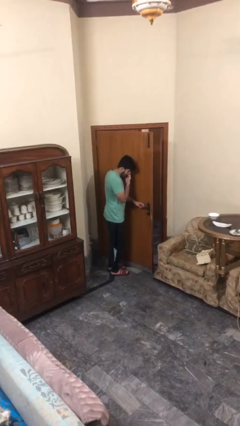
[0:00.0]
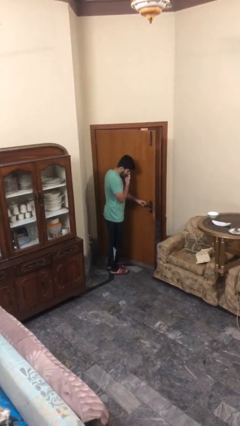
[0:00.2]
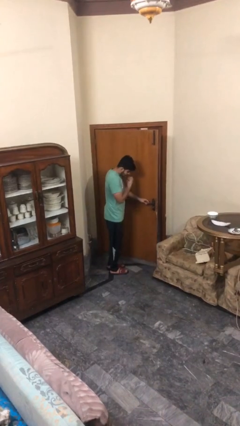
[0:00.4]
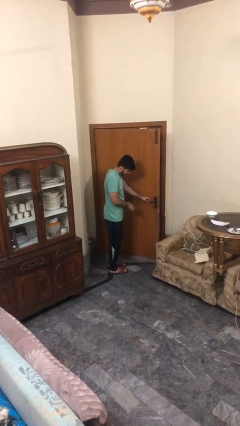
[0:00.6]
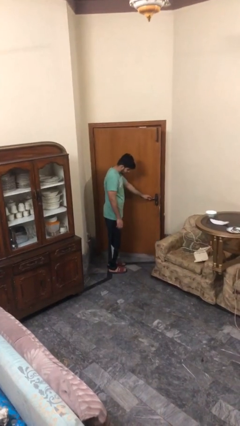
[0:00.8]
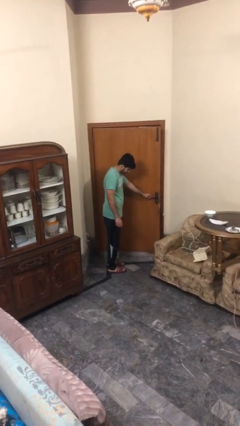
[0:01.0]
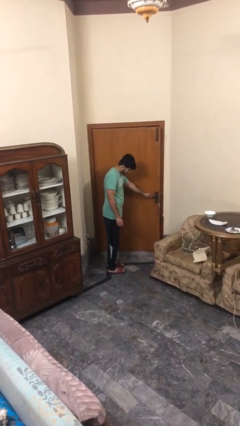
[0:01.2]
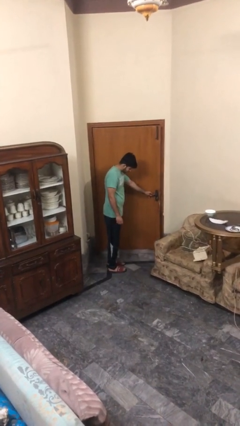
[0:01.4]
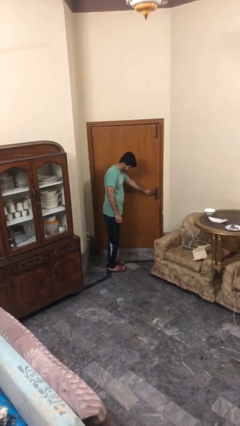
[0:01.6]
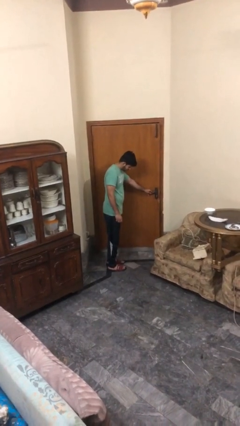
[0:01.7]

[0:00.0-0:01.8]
person closes facility door

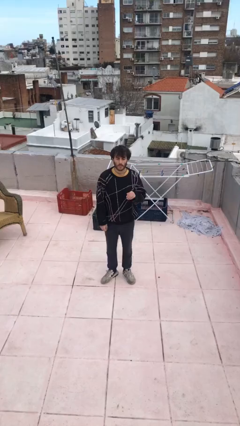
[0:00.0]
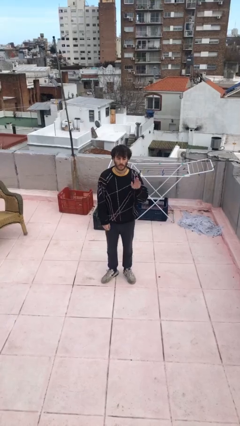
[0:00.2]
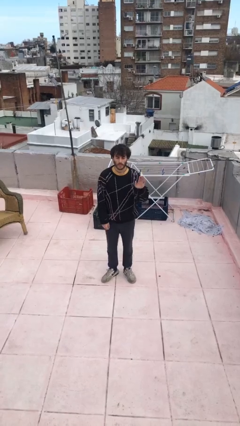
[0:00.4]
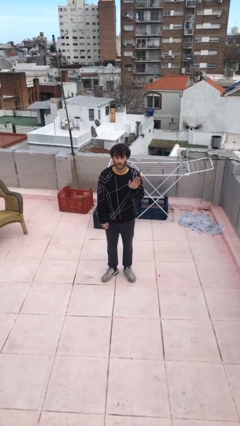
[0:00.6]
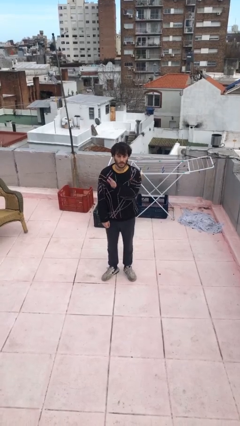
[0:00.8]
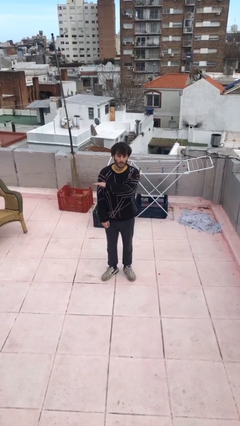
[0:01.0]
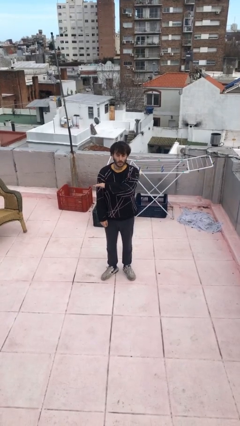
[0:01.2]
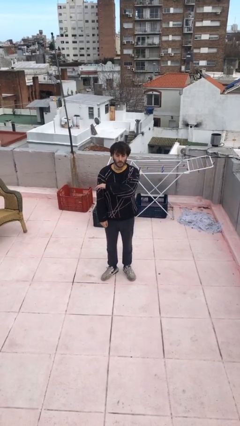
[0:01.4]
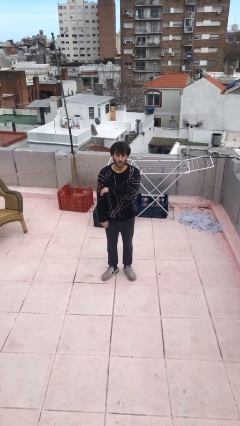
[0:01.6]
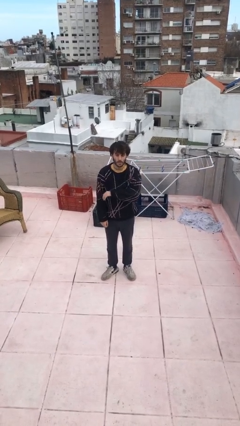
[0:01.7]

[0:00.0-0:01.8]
person gestures swipe right

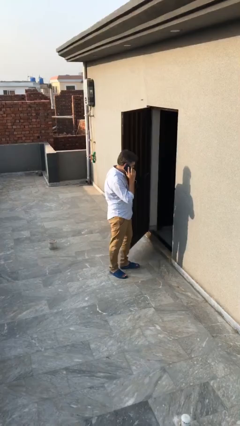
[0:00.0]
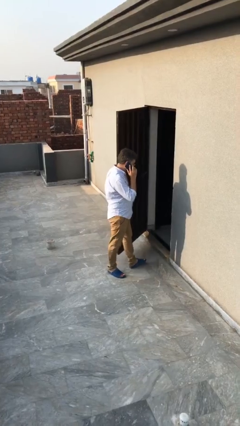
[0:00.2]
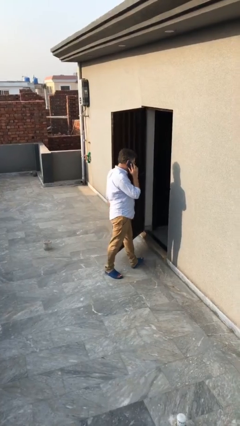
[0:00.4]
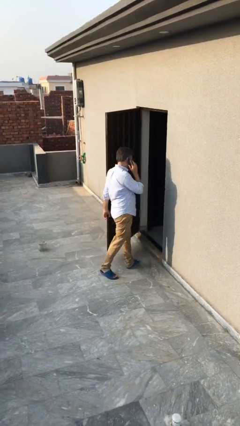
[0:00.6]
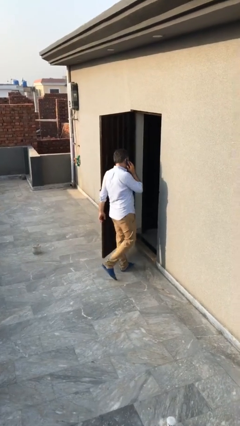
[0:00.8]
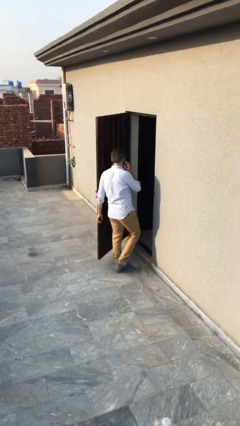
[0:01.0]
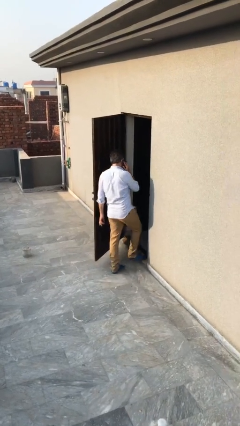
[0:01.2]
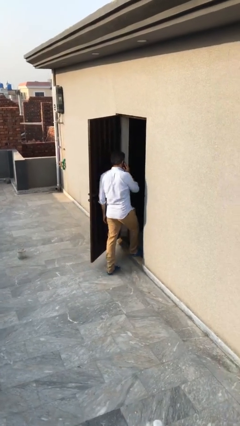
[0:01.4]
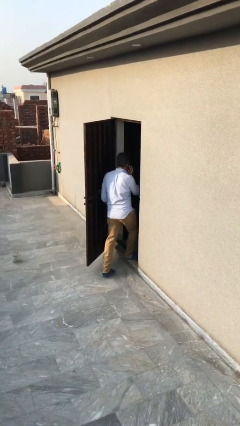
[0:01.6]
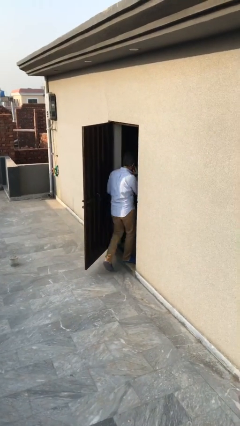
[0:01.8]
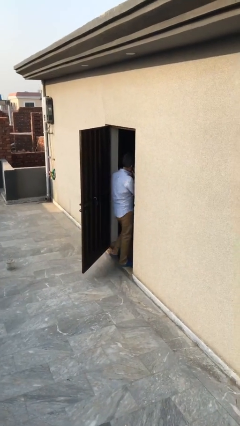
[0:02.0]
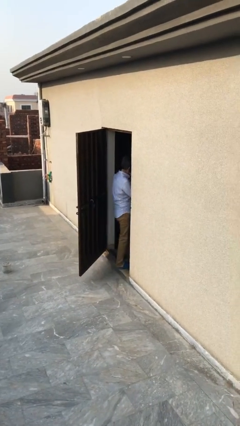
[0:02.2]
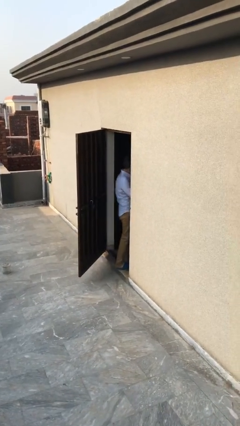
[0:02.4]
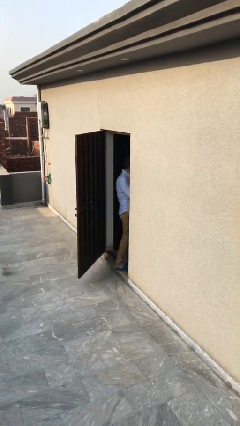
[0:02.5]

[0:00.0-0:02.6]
person exits scene through structure

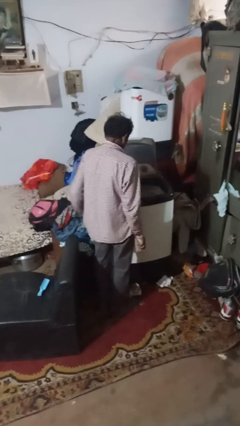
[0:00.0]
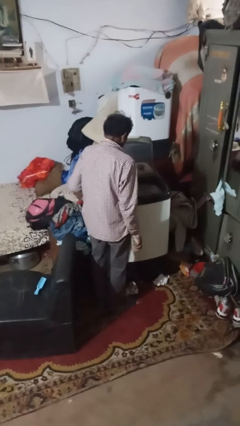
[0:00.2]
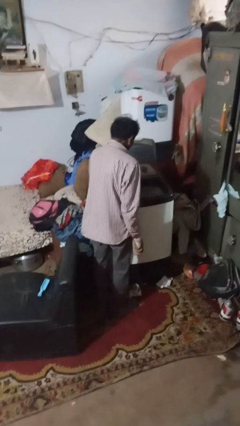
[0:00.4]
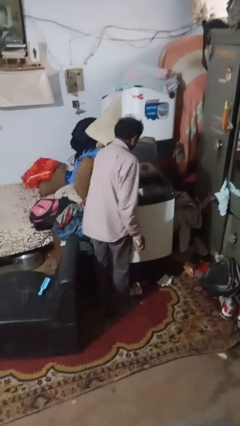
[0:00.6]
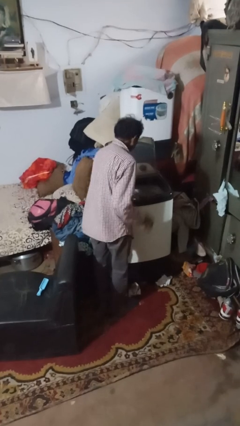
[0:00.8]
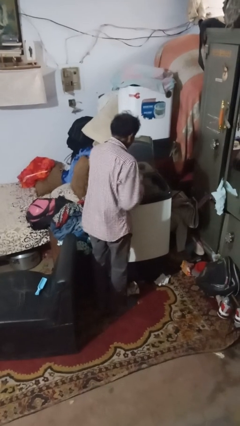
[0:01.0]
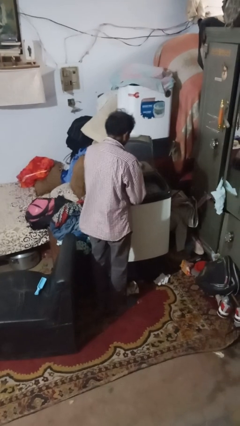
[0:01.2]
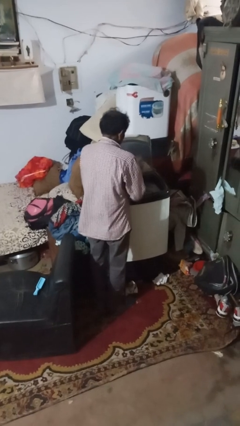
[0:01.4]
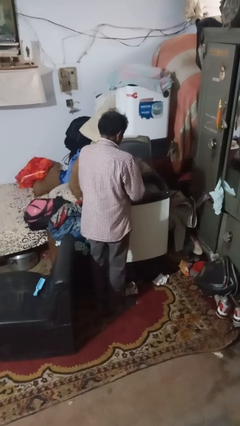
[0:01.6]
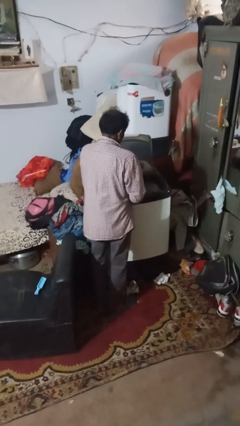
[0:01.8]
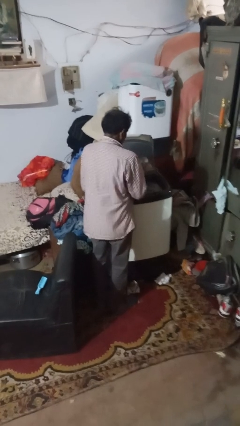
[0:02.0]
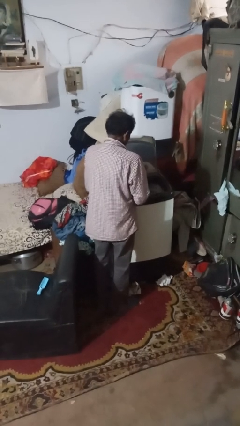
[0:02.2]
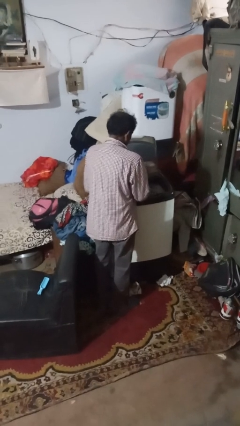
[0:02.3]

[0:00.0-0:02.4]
person cleans dryer lint trap

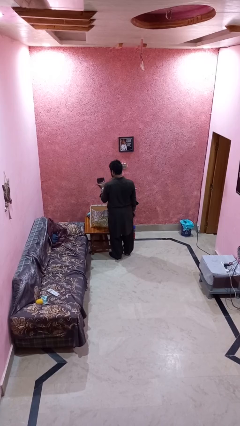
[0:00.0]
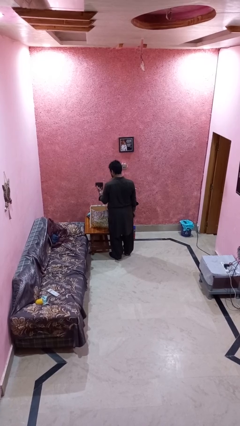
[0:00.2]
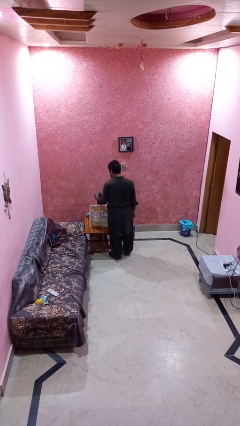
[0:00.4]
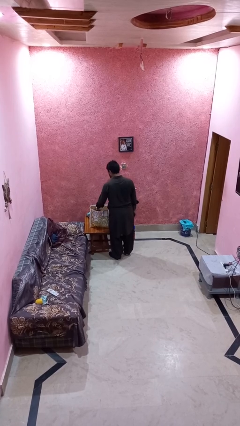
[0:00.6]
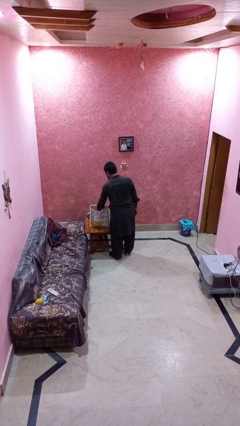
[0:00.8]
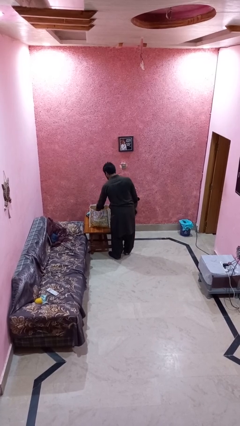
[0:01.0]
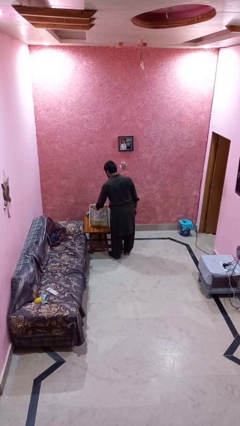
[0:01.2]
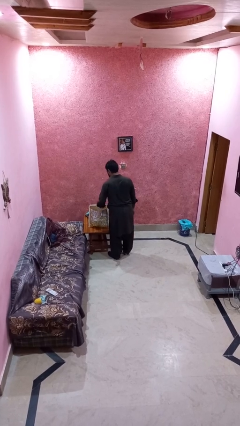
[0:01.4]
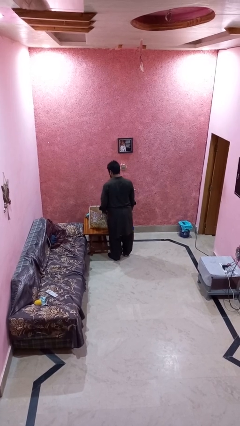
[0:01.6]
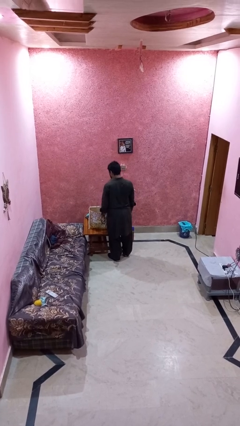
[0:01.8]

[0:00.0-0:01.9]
person puts object into bag

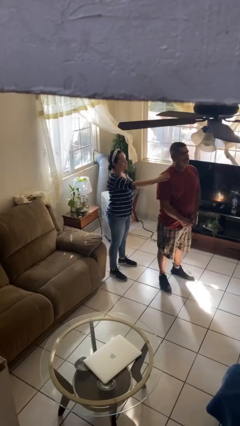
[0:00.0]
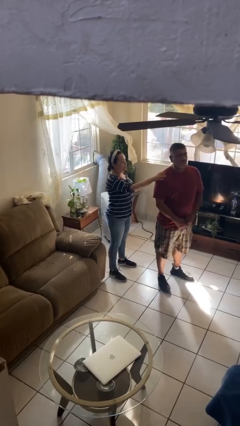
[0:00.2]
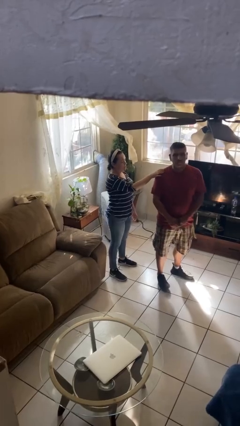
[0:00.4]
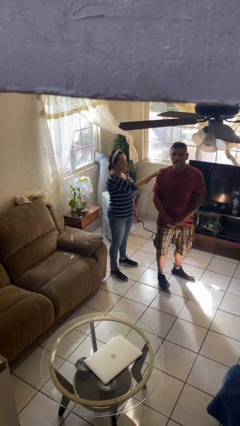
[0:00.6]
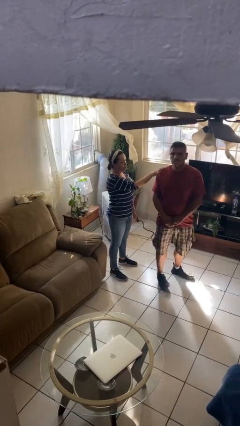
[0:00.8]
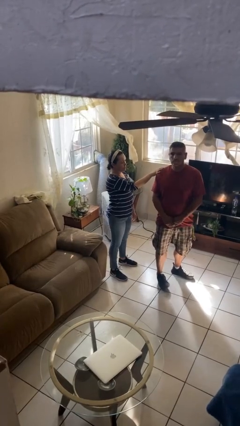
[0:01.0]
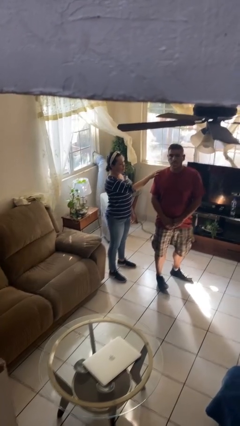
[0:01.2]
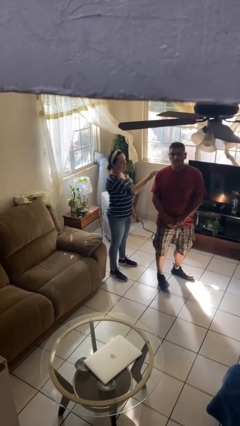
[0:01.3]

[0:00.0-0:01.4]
person spins person around

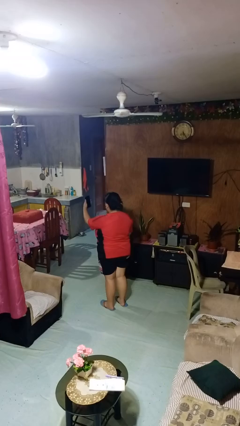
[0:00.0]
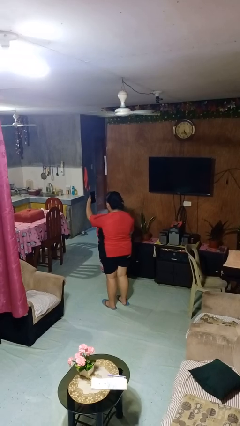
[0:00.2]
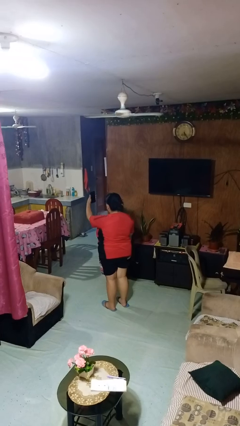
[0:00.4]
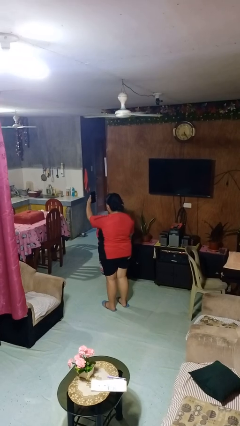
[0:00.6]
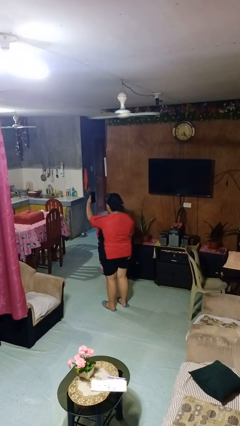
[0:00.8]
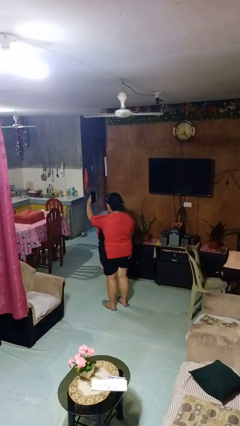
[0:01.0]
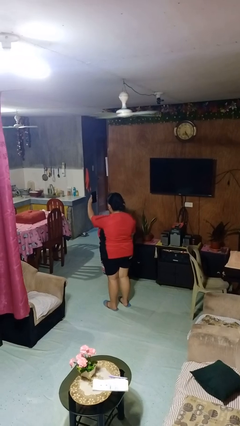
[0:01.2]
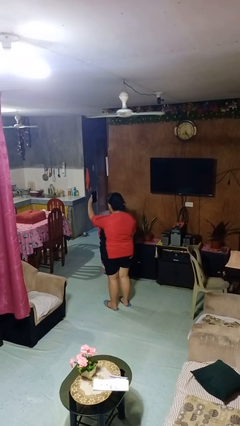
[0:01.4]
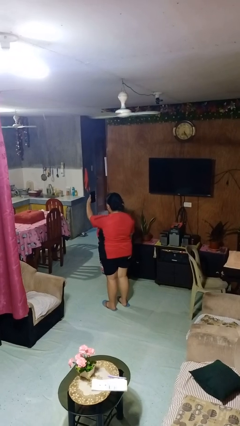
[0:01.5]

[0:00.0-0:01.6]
person takes selfie

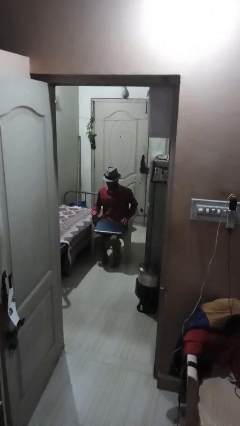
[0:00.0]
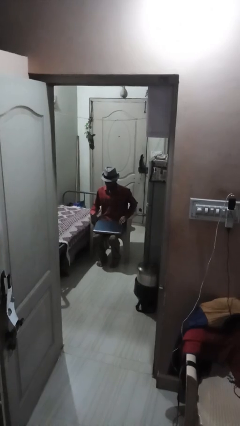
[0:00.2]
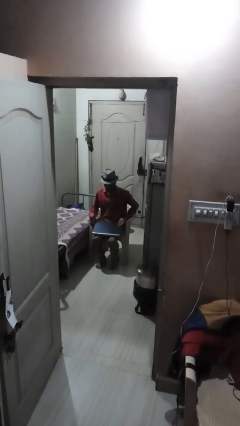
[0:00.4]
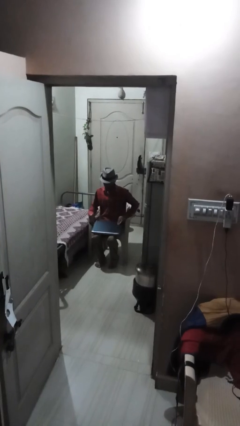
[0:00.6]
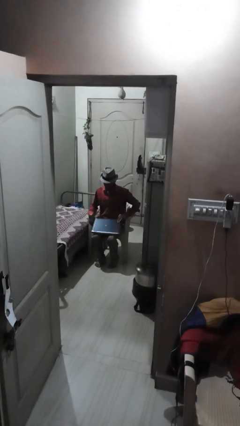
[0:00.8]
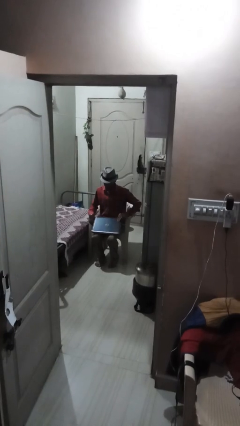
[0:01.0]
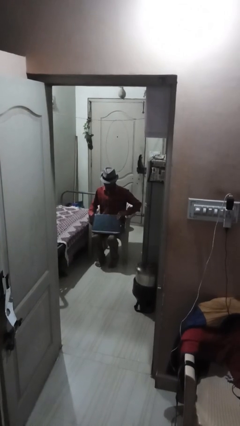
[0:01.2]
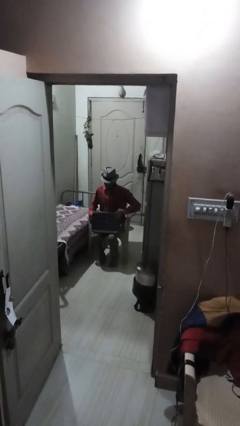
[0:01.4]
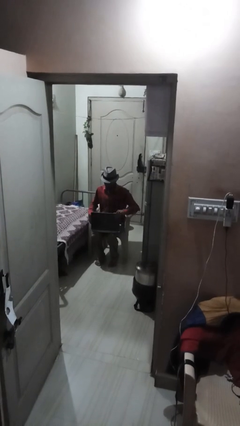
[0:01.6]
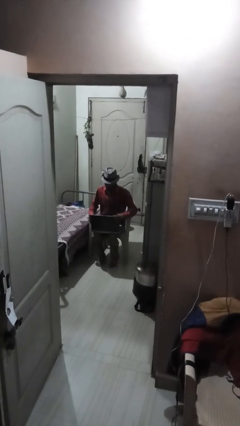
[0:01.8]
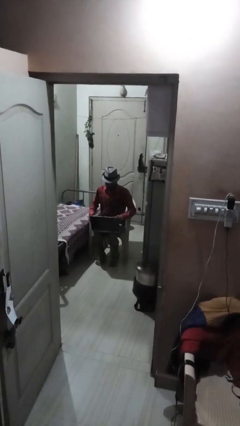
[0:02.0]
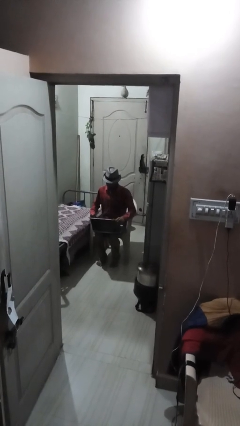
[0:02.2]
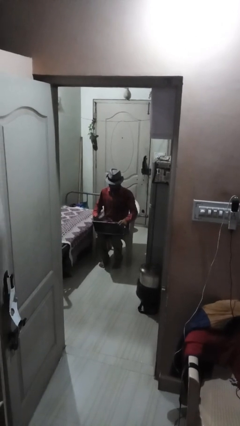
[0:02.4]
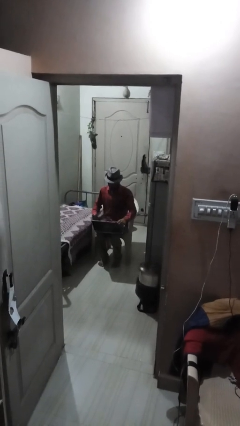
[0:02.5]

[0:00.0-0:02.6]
person opens laptop

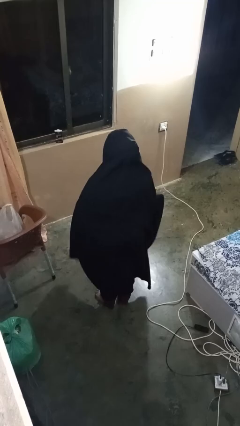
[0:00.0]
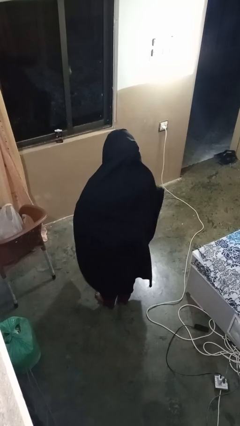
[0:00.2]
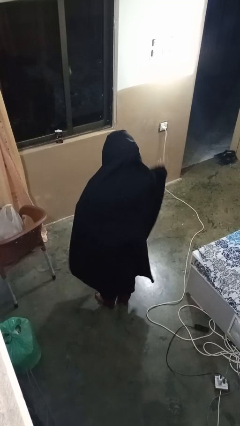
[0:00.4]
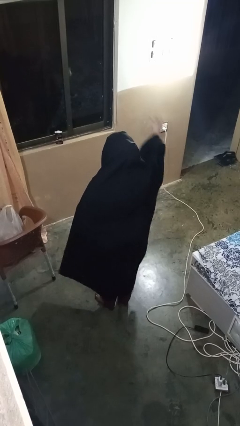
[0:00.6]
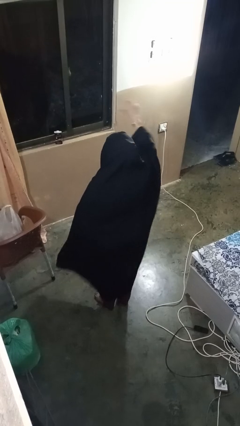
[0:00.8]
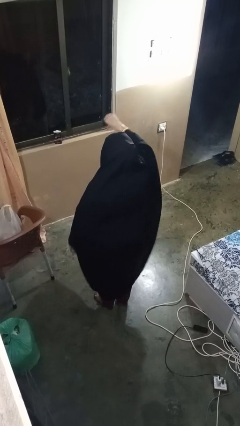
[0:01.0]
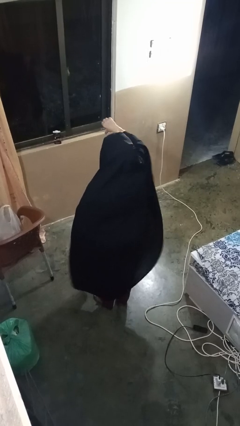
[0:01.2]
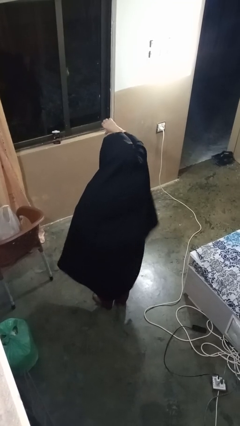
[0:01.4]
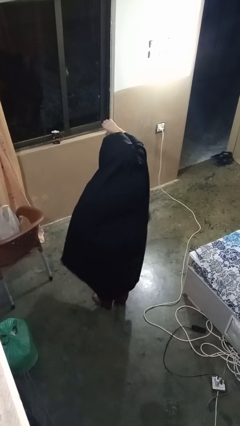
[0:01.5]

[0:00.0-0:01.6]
person gestures thumbs down
